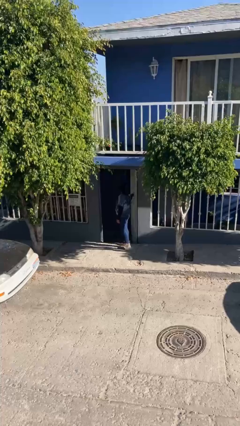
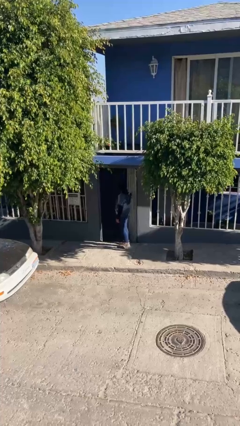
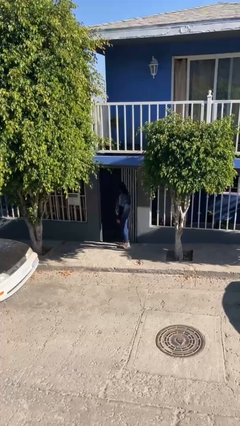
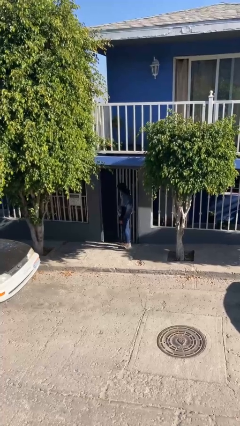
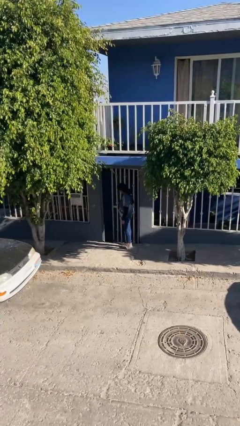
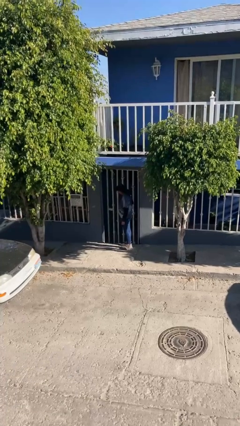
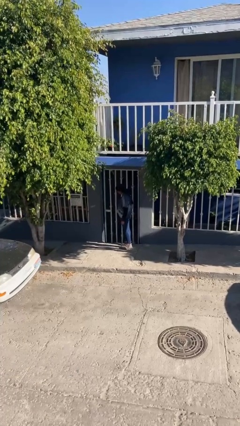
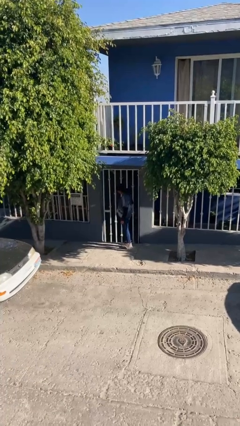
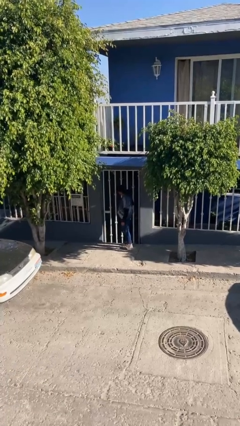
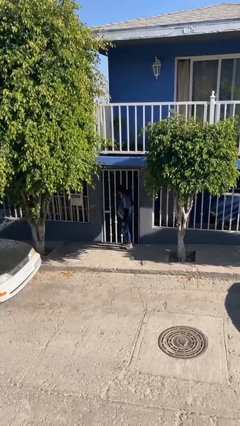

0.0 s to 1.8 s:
person closes facility door

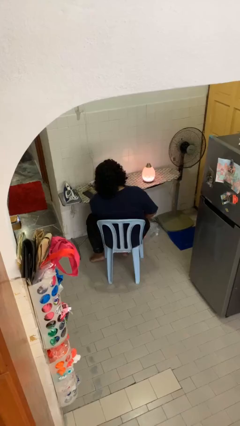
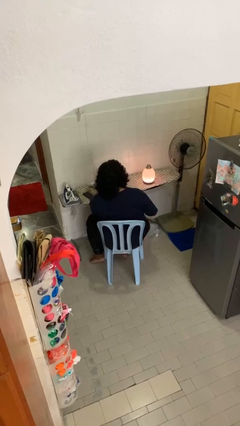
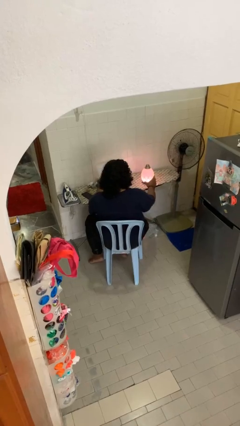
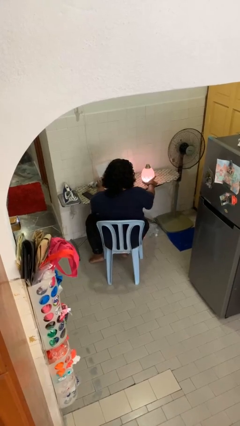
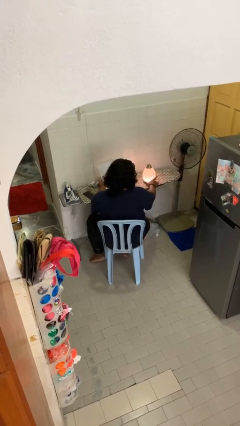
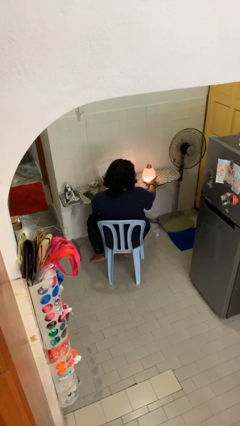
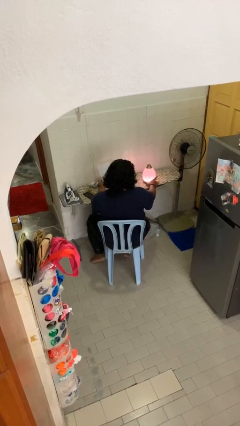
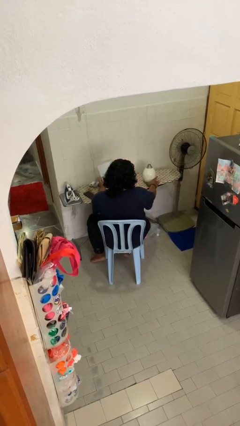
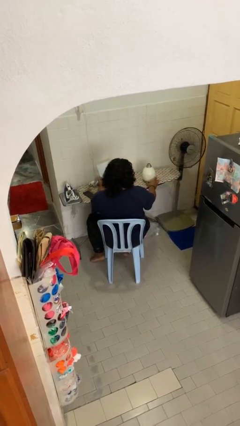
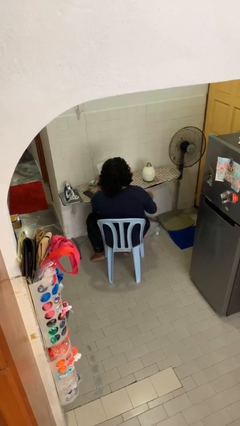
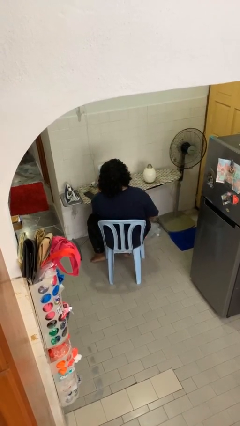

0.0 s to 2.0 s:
person turns off lamp

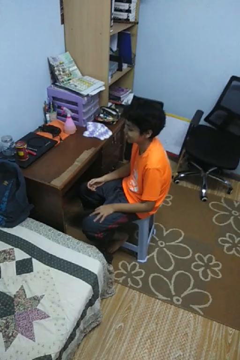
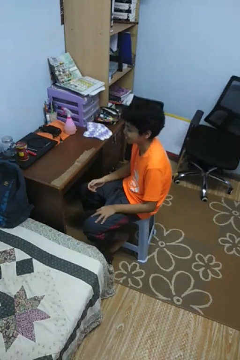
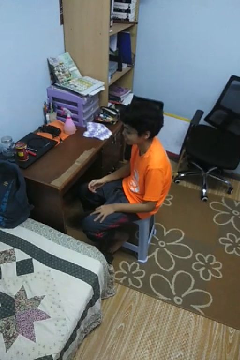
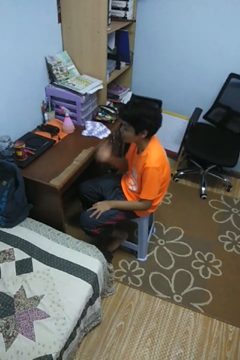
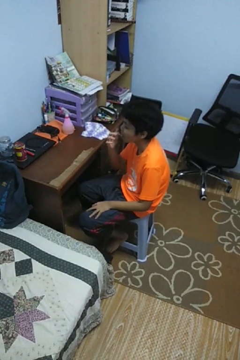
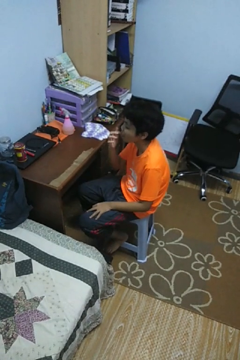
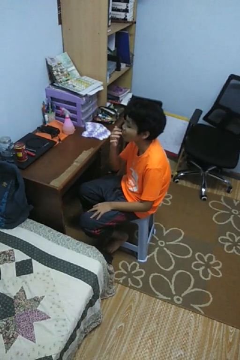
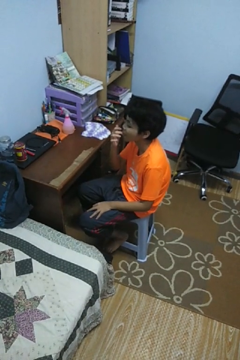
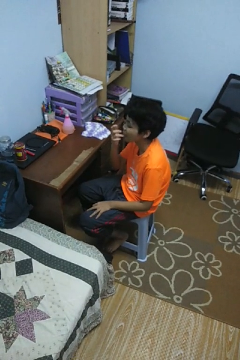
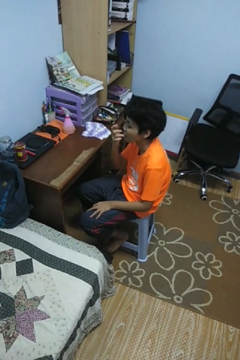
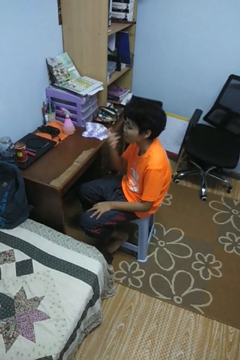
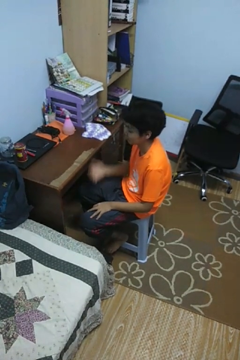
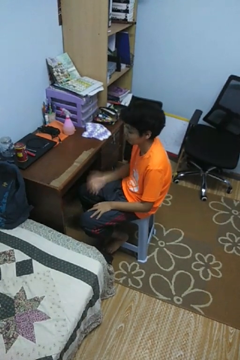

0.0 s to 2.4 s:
person licks fingers

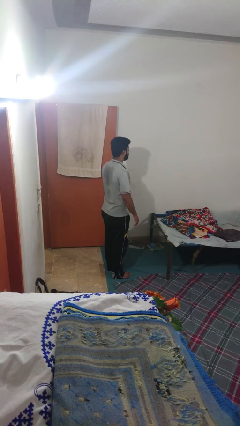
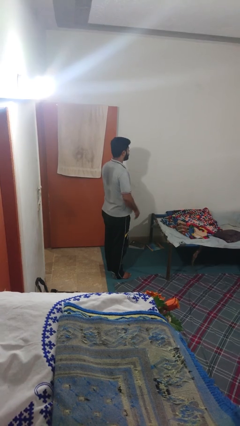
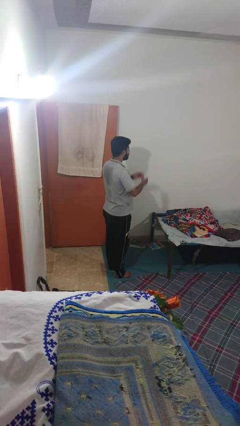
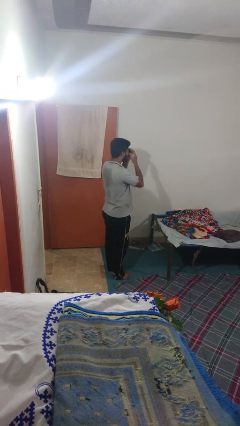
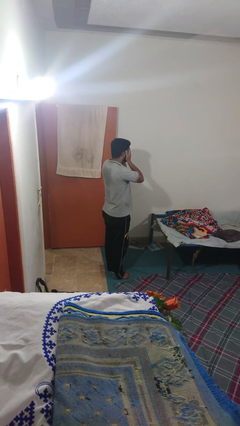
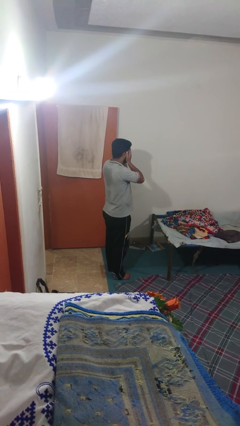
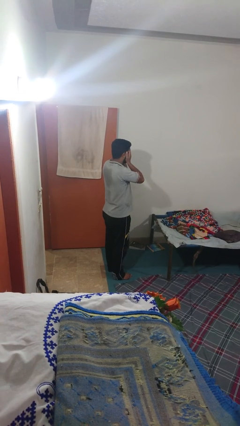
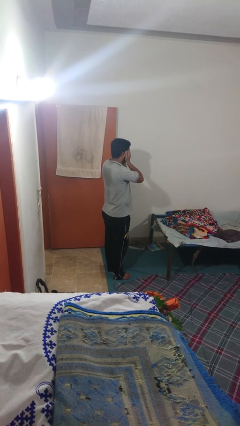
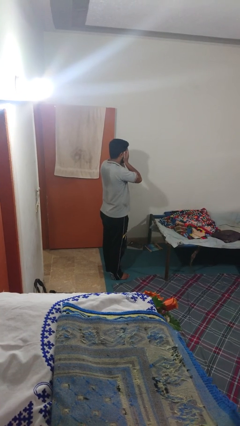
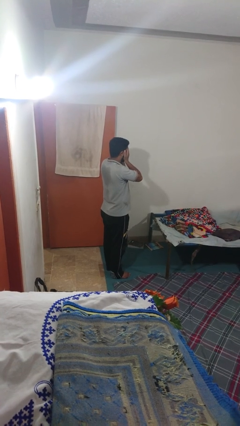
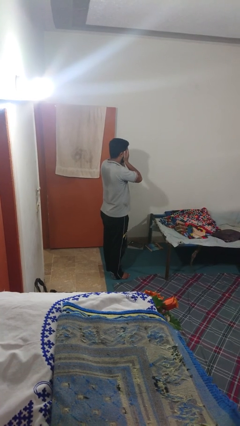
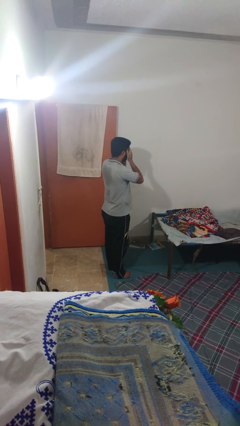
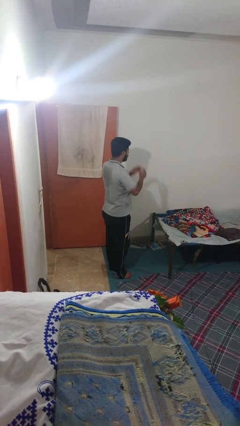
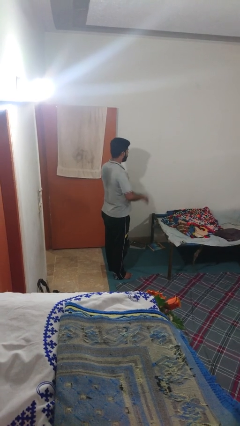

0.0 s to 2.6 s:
person covers face with hands

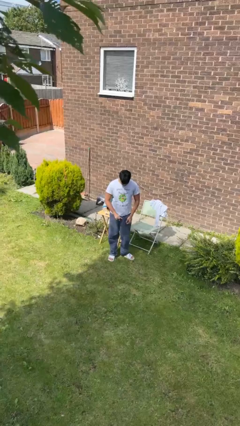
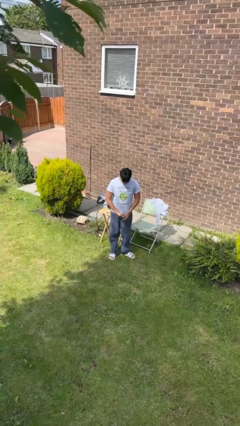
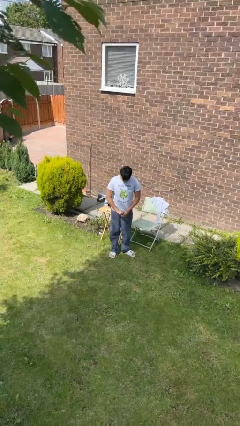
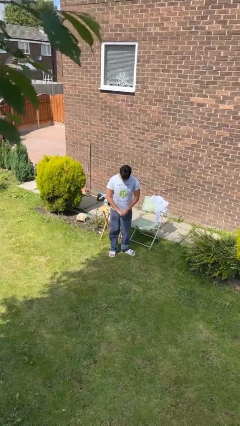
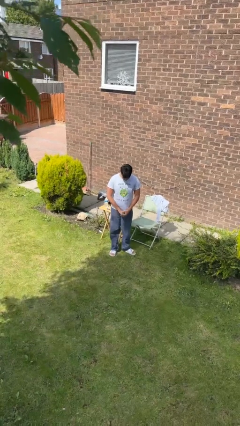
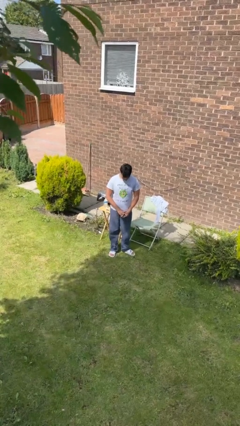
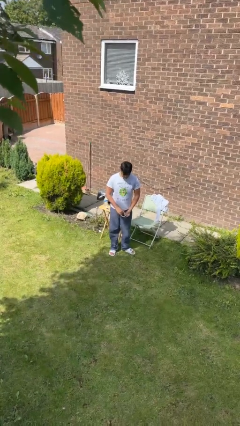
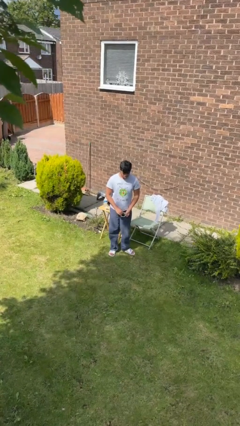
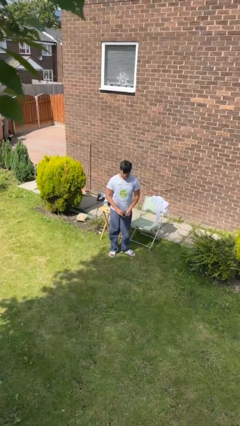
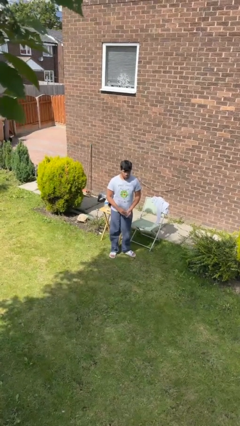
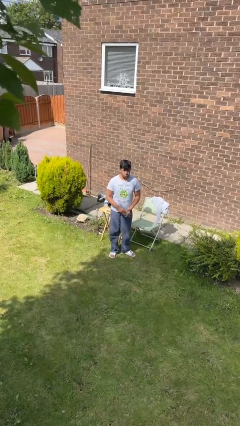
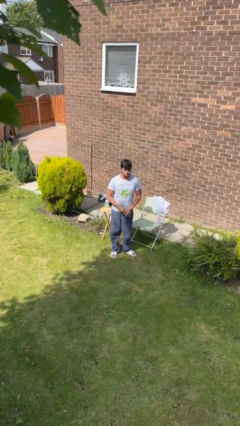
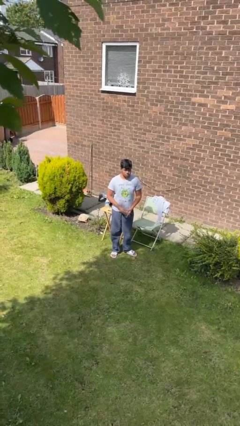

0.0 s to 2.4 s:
person takes off wristwatch

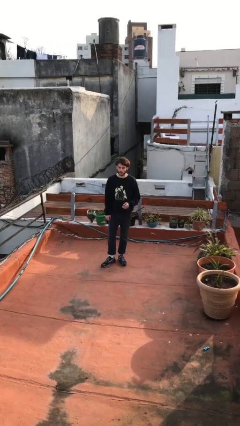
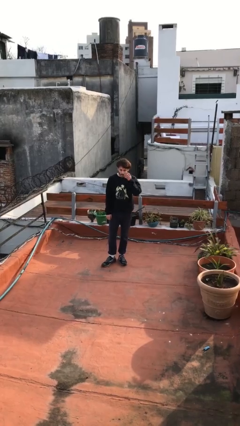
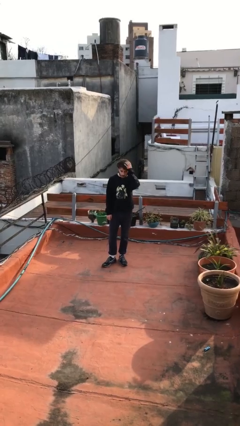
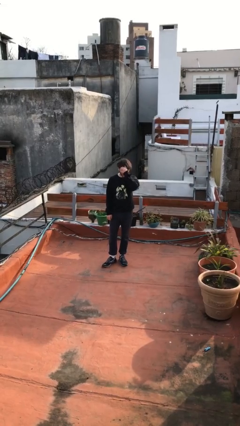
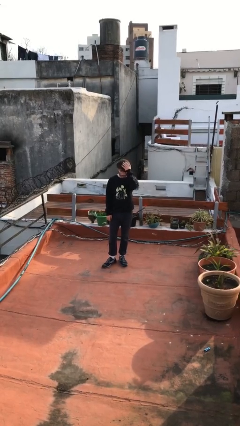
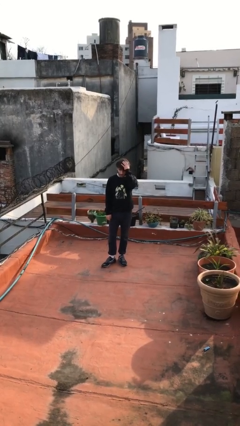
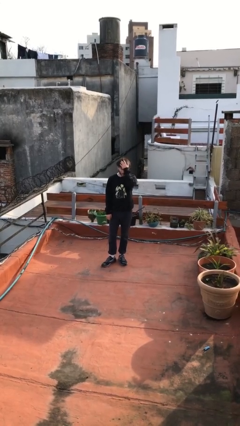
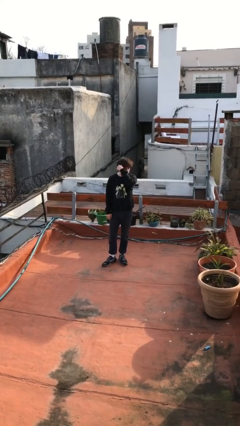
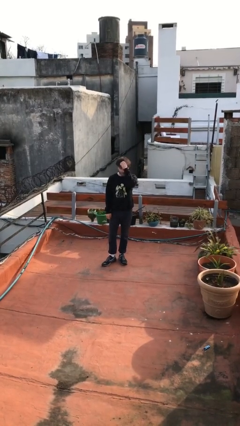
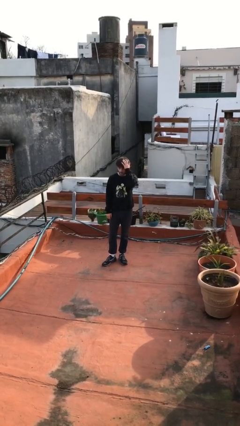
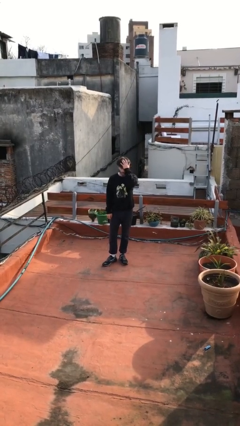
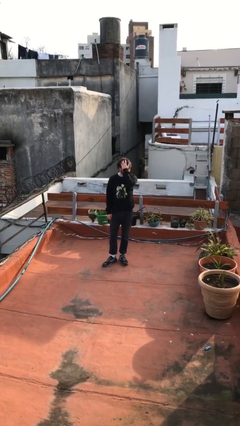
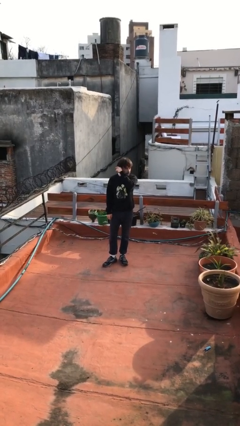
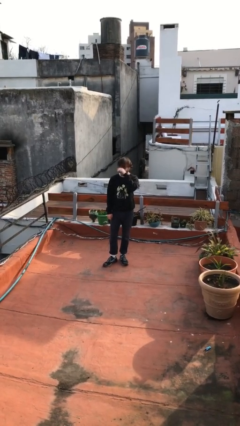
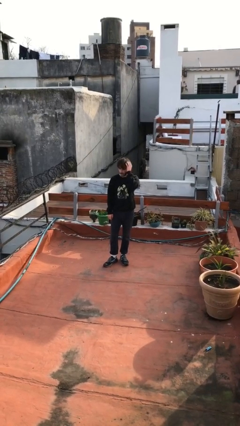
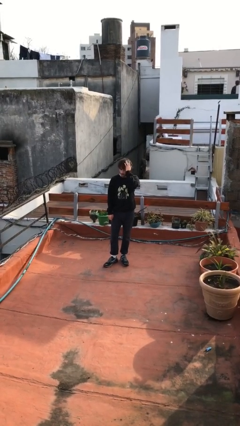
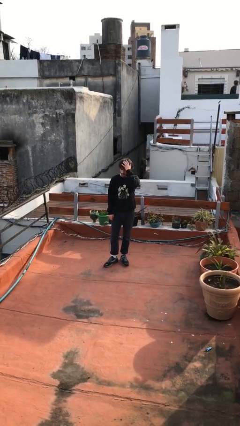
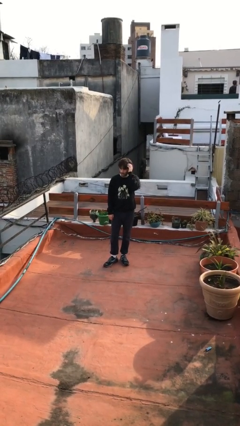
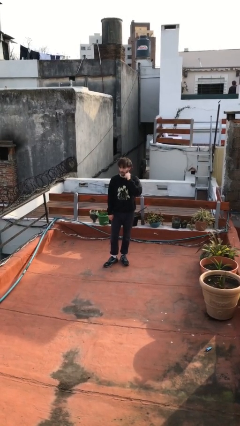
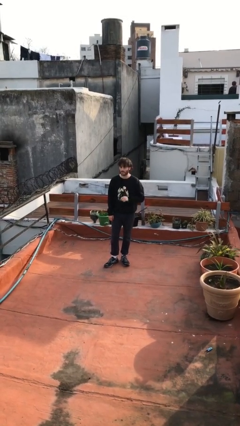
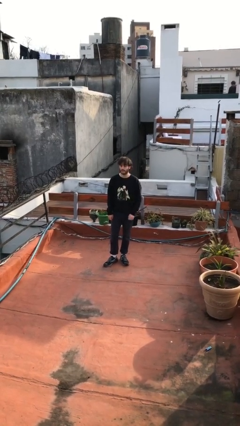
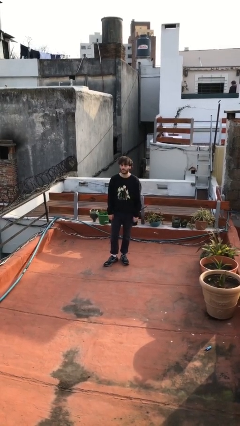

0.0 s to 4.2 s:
person scratches face

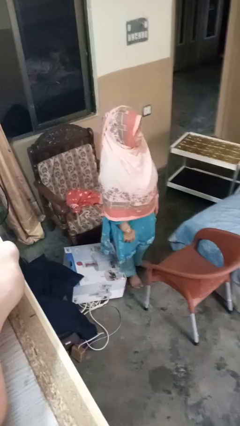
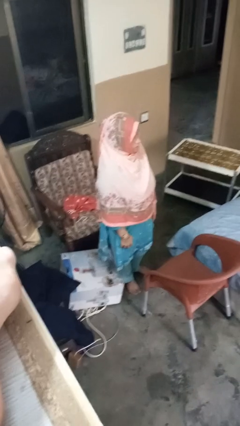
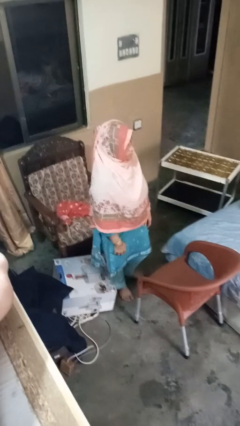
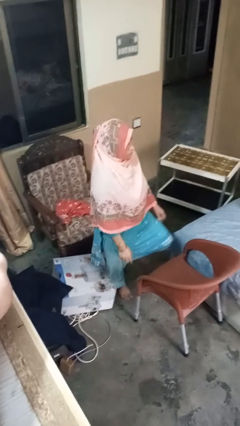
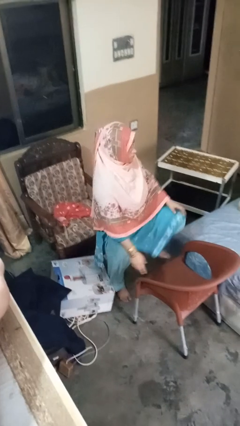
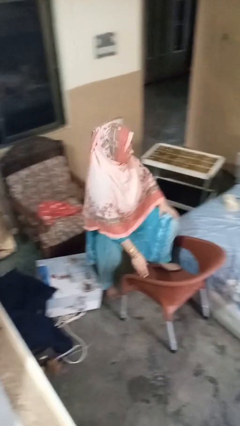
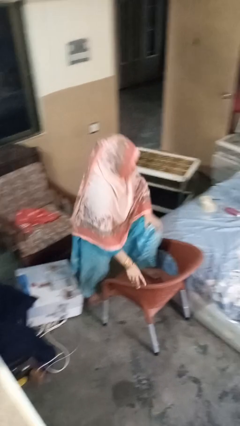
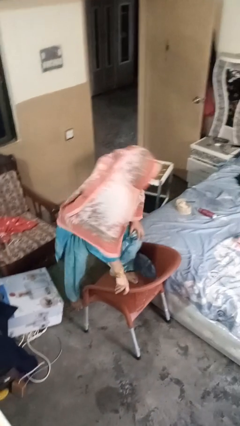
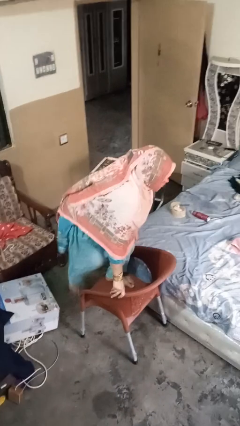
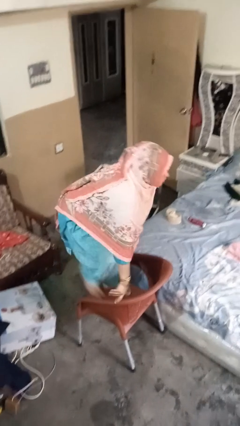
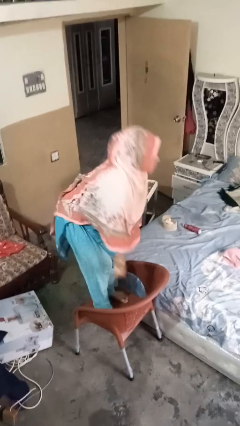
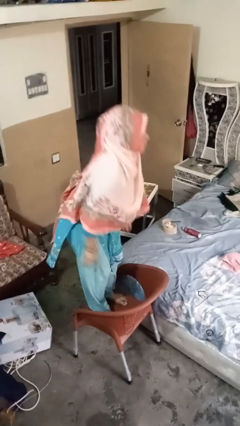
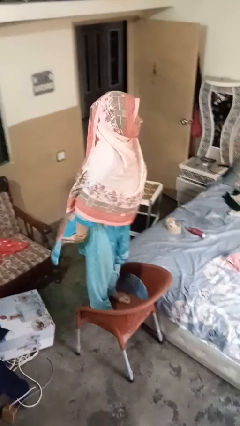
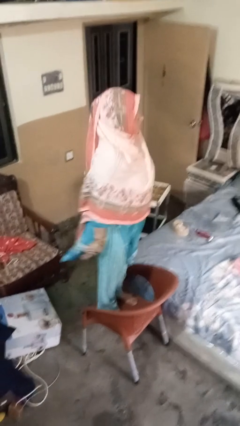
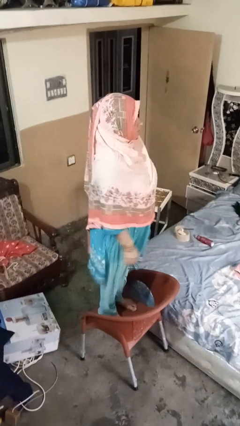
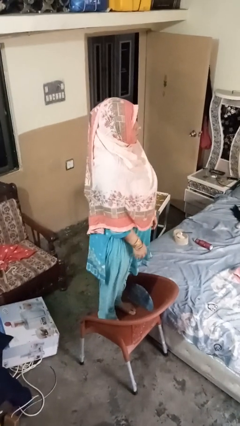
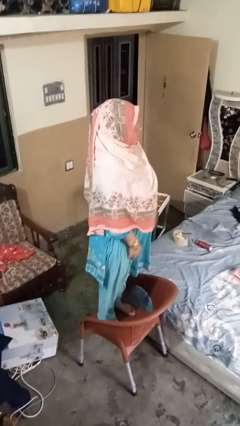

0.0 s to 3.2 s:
person climbs on chair
